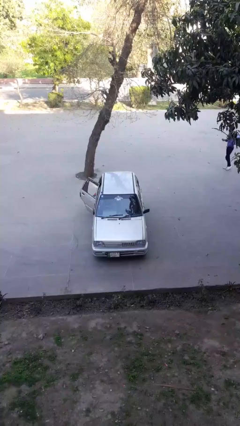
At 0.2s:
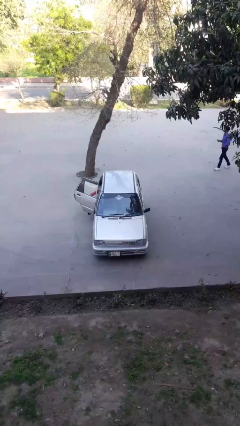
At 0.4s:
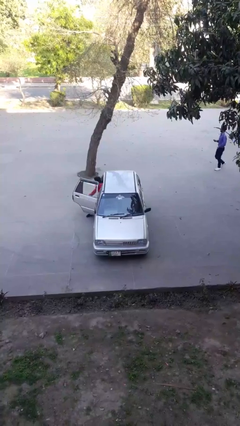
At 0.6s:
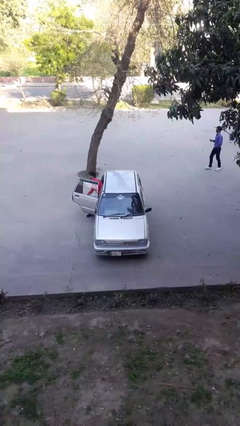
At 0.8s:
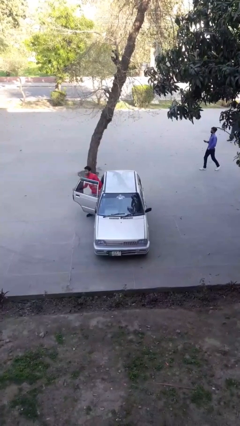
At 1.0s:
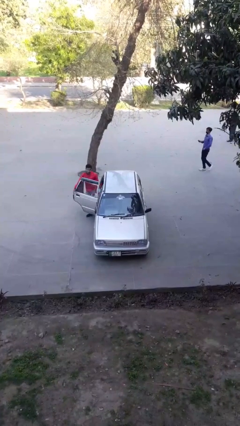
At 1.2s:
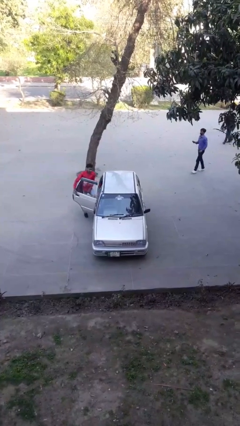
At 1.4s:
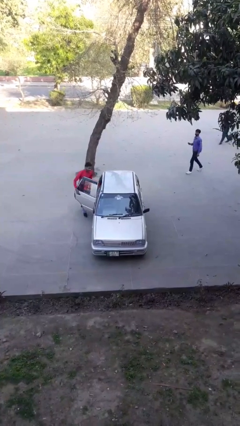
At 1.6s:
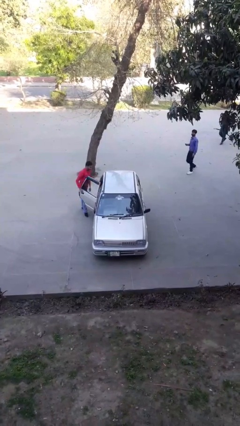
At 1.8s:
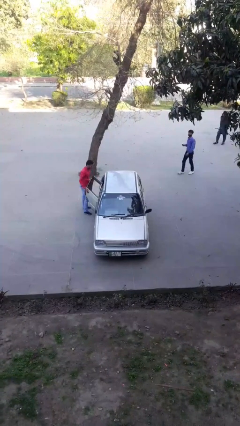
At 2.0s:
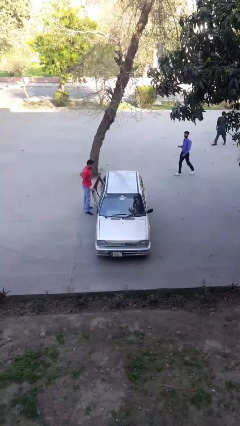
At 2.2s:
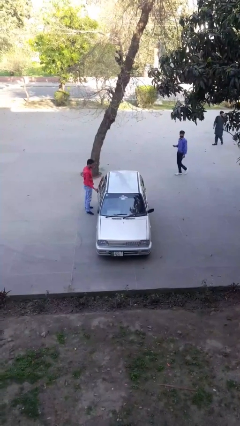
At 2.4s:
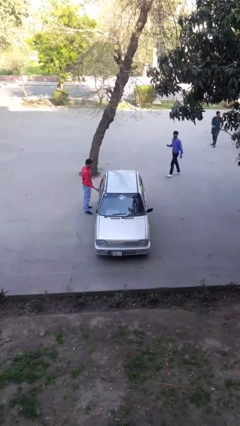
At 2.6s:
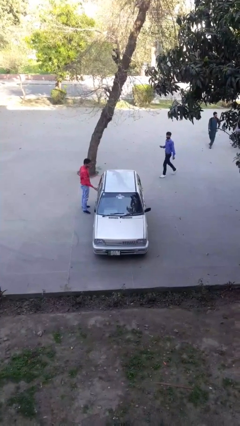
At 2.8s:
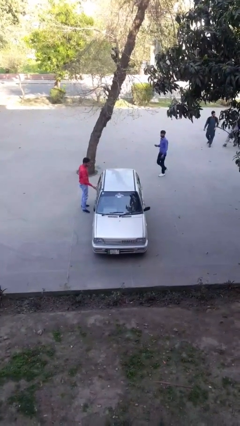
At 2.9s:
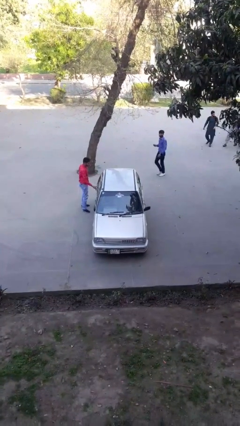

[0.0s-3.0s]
car drops off person

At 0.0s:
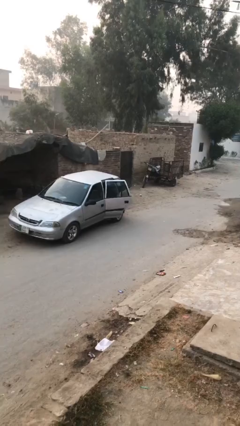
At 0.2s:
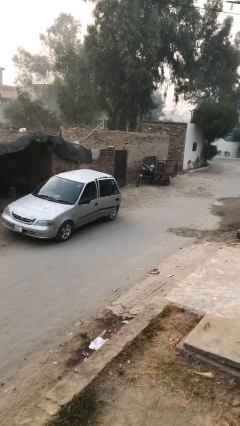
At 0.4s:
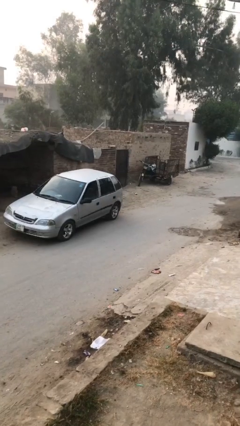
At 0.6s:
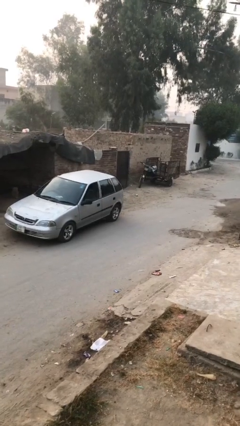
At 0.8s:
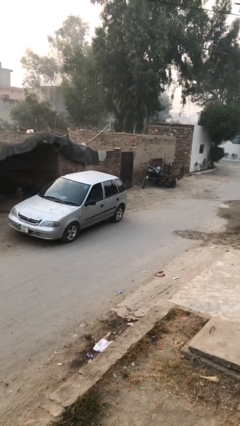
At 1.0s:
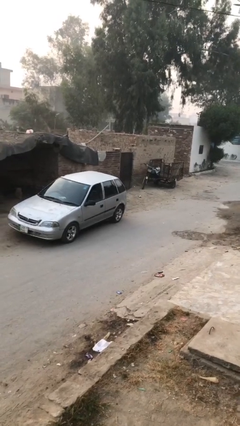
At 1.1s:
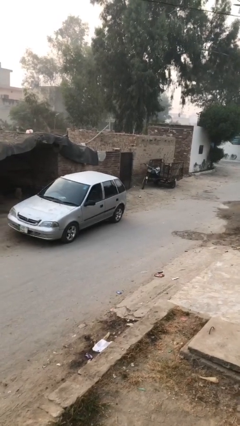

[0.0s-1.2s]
person closes car door

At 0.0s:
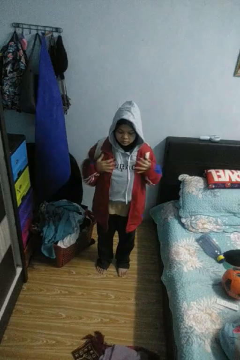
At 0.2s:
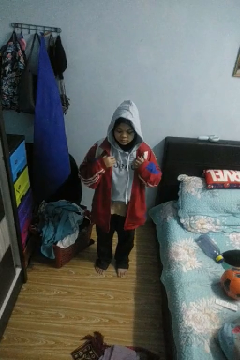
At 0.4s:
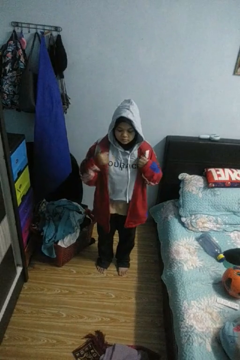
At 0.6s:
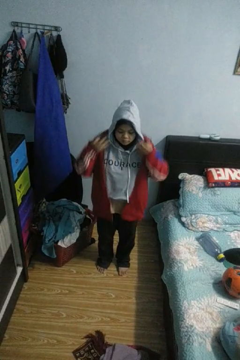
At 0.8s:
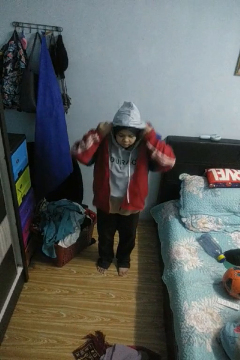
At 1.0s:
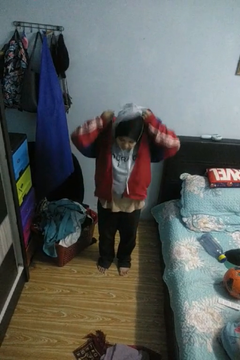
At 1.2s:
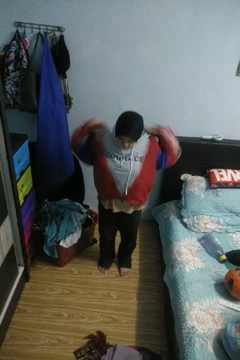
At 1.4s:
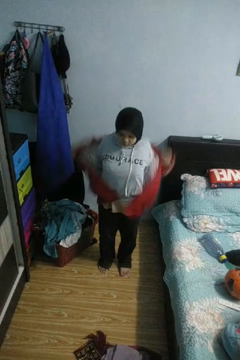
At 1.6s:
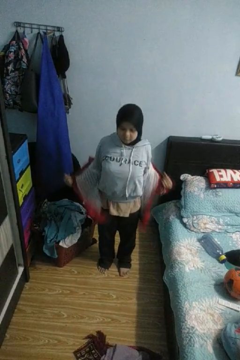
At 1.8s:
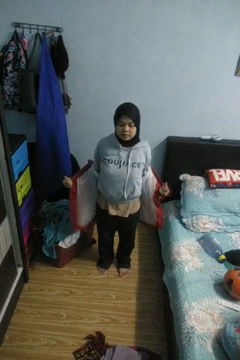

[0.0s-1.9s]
person takes off hoodie

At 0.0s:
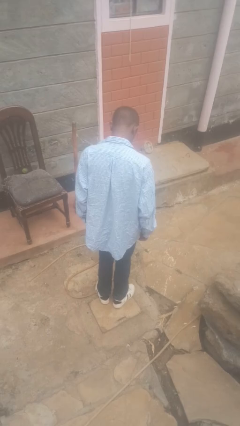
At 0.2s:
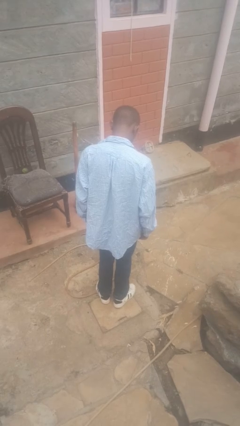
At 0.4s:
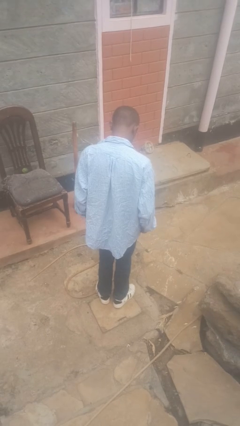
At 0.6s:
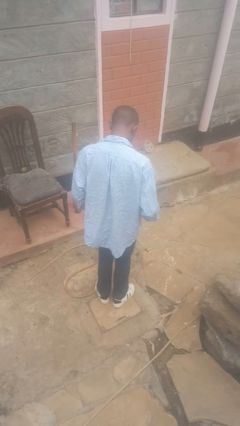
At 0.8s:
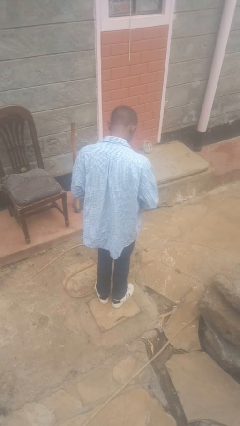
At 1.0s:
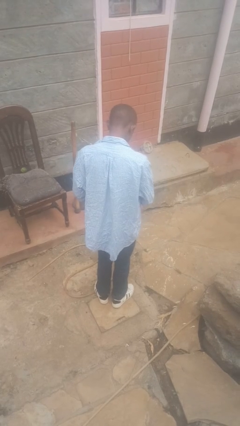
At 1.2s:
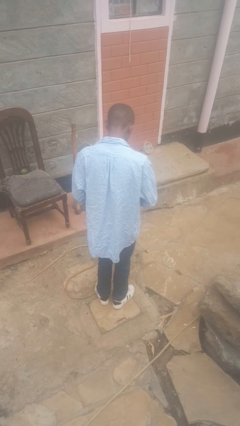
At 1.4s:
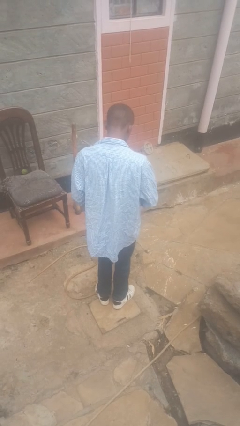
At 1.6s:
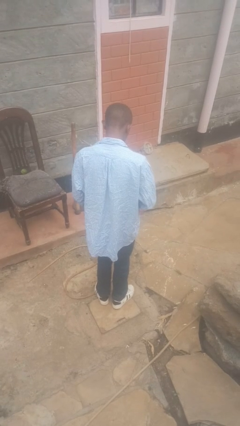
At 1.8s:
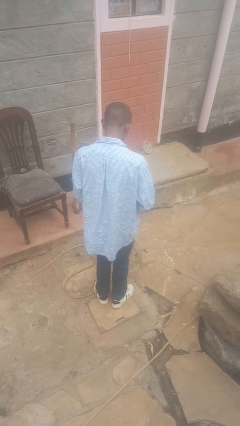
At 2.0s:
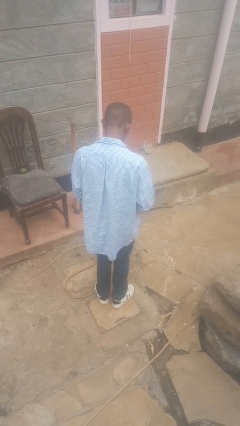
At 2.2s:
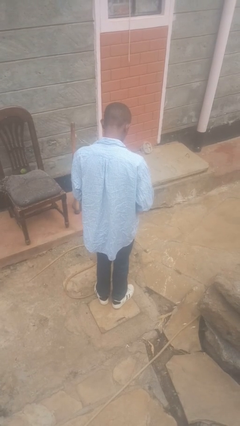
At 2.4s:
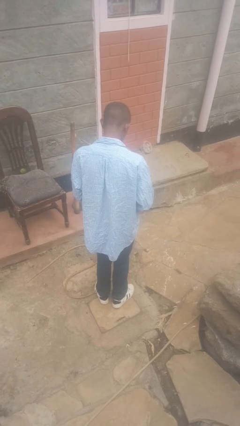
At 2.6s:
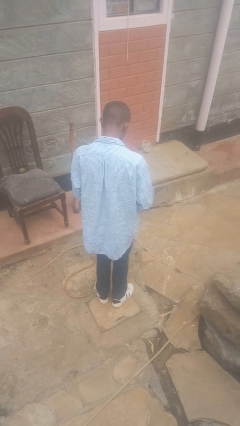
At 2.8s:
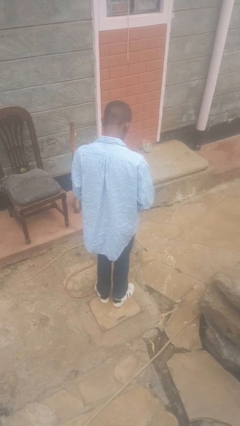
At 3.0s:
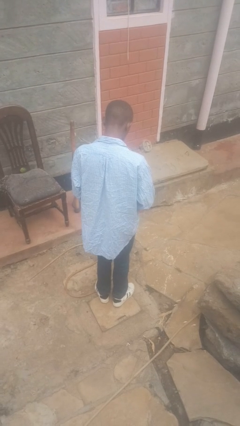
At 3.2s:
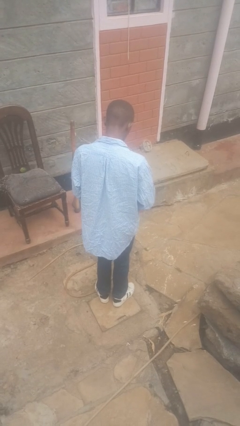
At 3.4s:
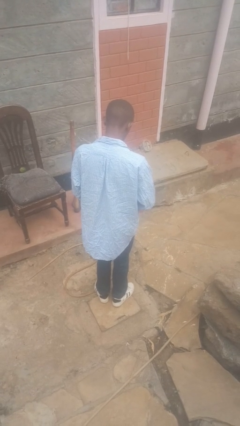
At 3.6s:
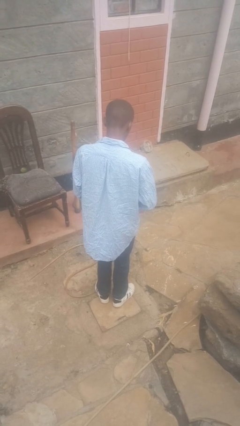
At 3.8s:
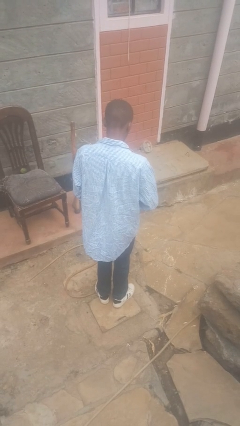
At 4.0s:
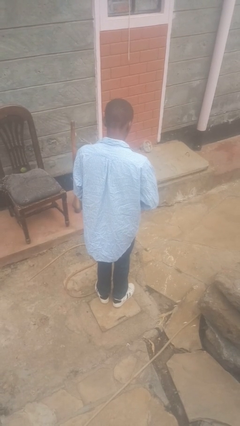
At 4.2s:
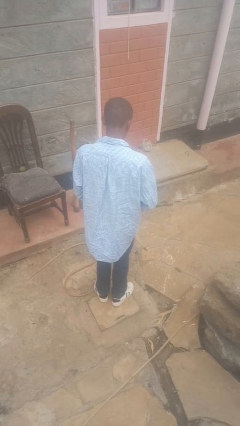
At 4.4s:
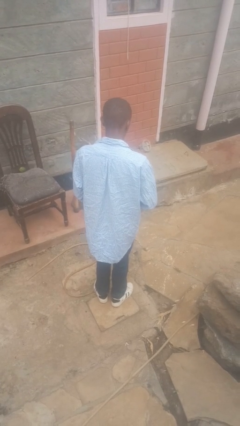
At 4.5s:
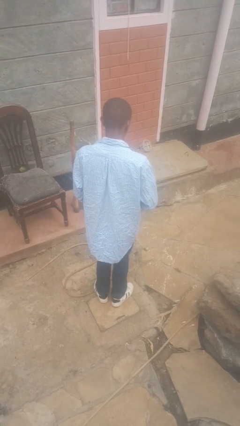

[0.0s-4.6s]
person buttons shirt

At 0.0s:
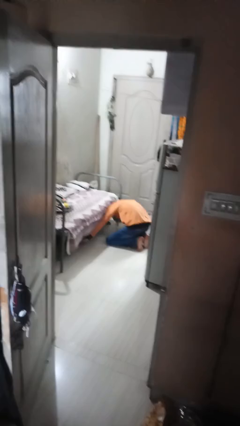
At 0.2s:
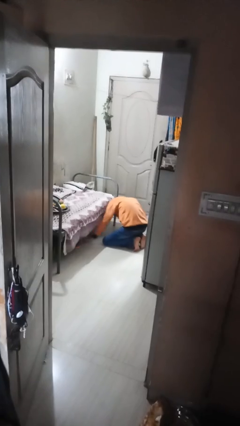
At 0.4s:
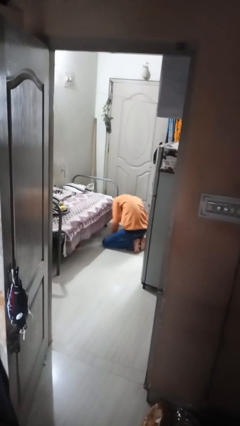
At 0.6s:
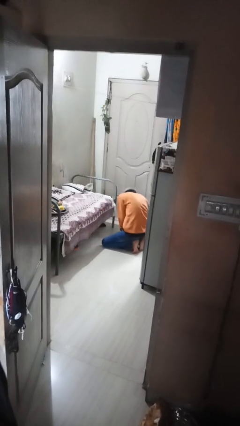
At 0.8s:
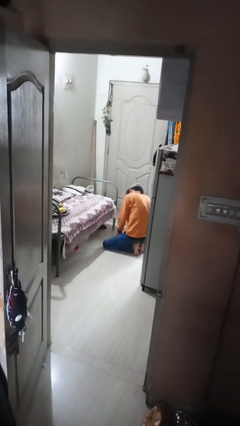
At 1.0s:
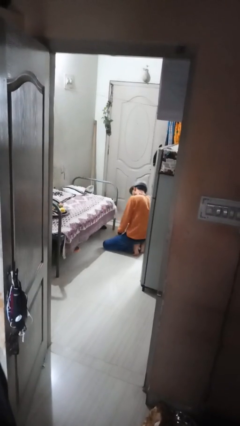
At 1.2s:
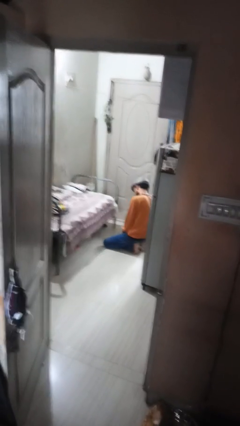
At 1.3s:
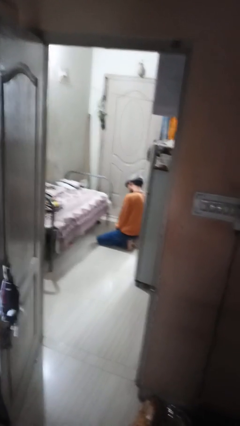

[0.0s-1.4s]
person searches under bed

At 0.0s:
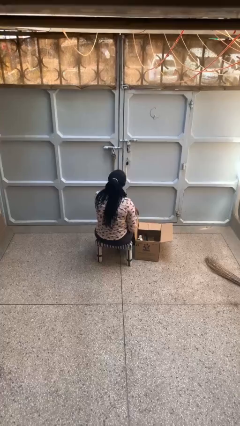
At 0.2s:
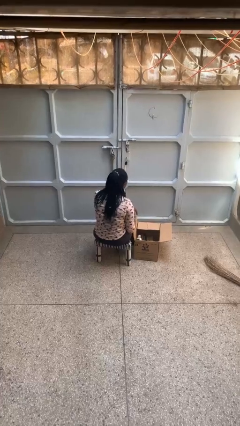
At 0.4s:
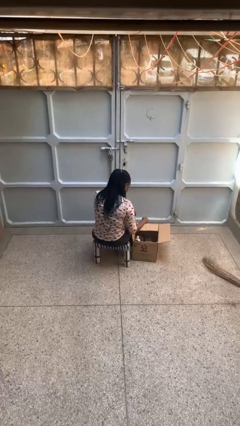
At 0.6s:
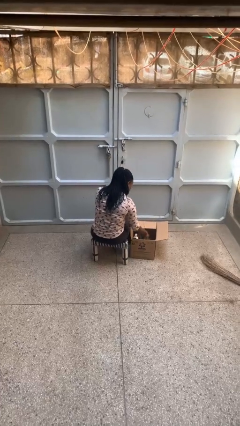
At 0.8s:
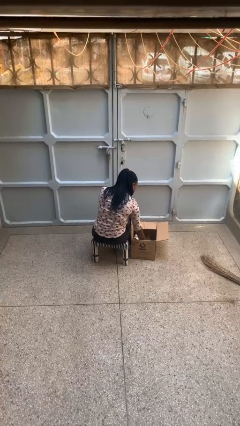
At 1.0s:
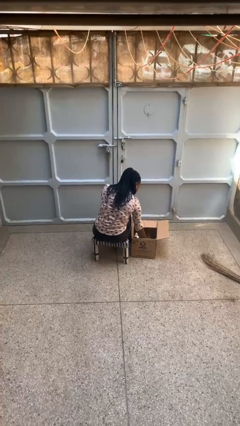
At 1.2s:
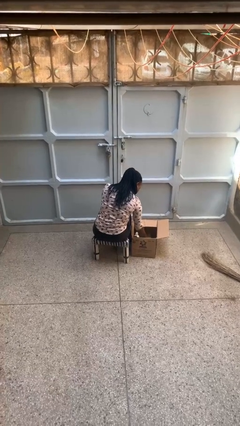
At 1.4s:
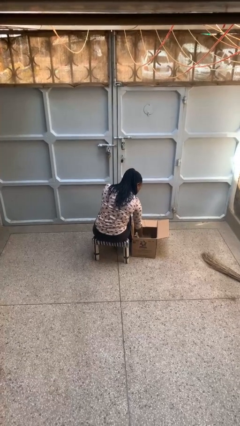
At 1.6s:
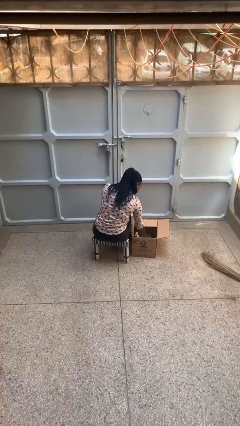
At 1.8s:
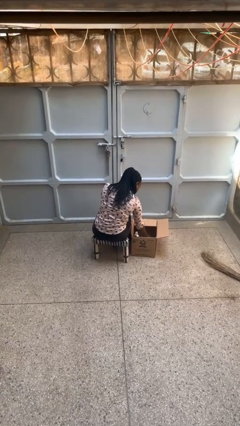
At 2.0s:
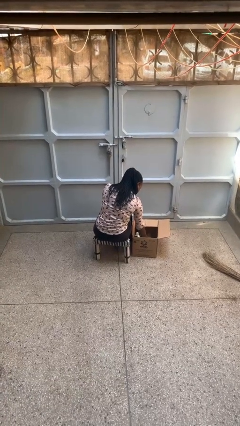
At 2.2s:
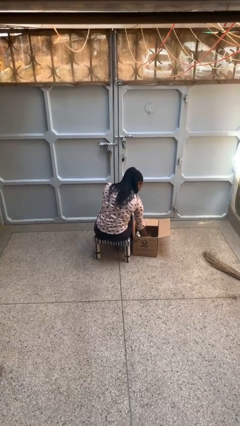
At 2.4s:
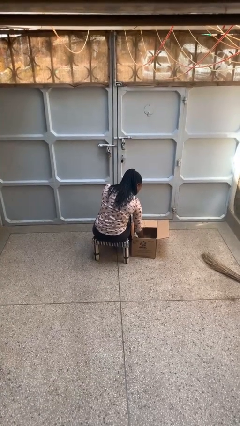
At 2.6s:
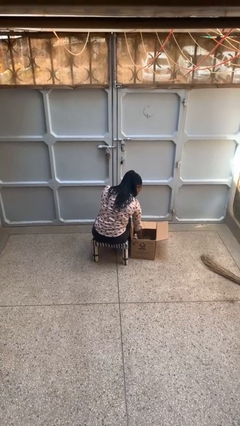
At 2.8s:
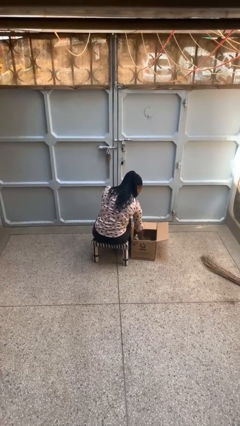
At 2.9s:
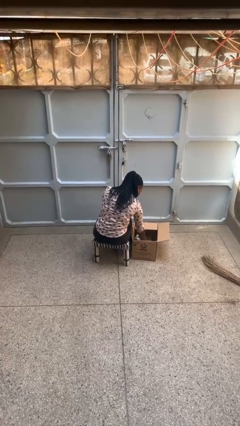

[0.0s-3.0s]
person searches in box

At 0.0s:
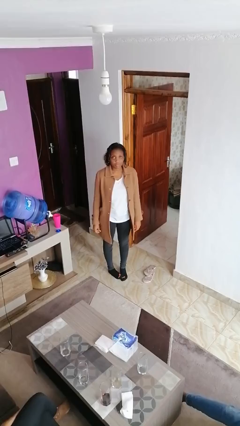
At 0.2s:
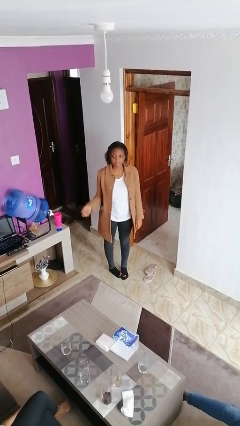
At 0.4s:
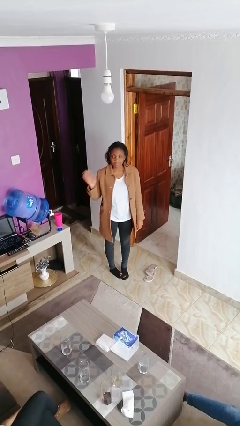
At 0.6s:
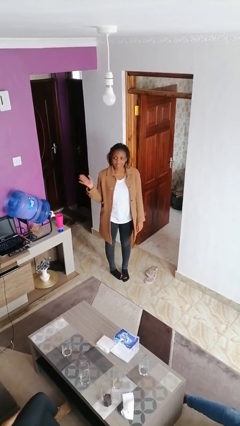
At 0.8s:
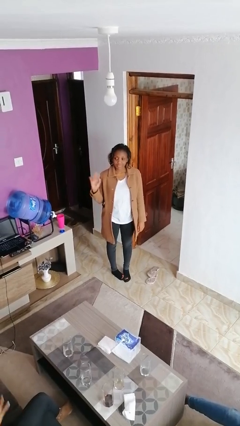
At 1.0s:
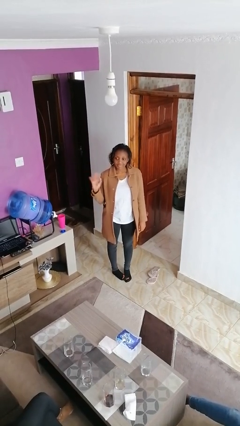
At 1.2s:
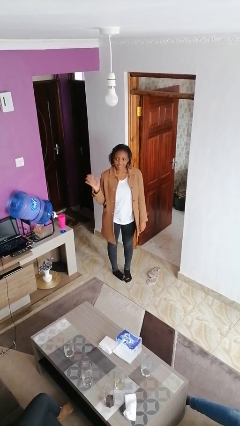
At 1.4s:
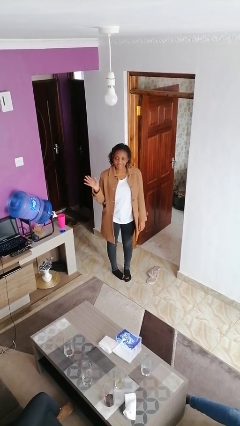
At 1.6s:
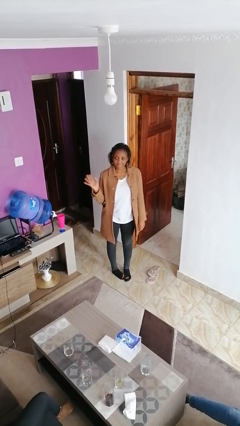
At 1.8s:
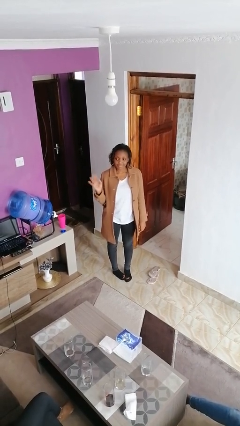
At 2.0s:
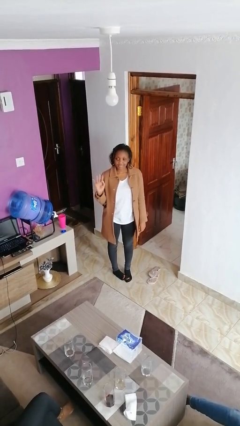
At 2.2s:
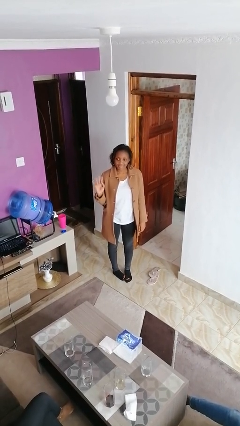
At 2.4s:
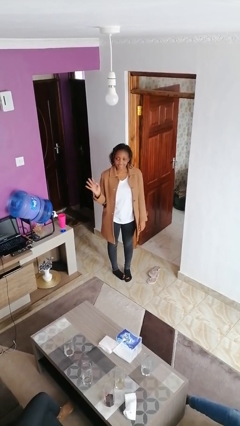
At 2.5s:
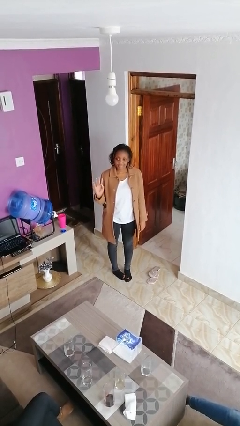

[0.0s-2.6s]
person waves at person
